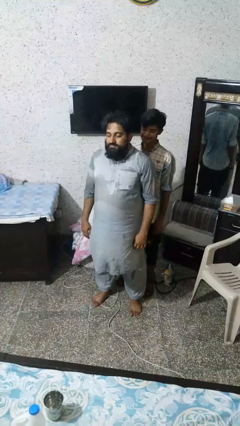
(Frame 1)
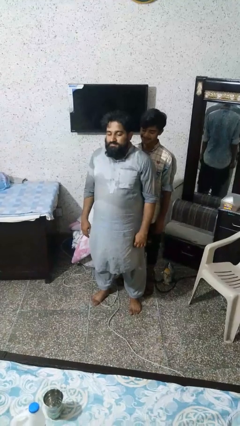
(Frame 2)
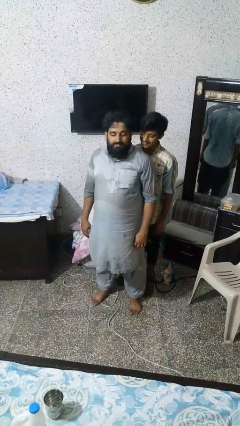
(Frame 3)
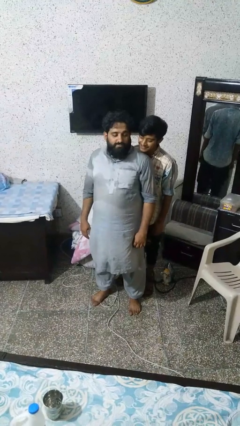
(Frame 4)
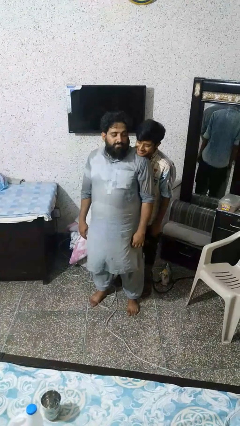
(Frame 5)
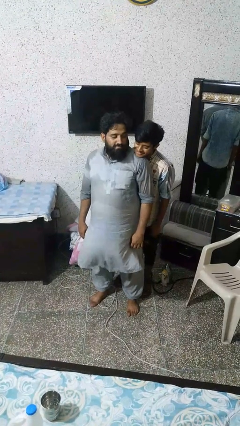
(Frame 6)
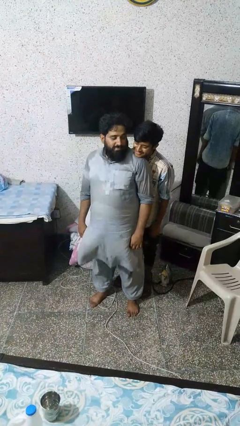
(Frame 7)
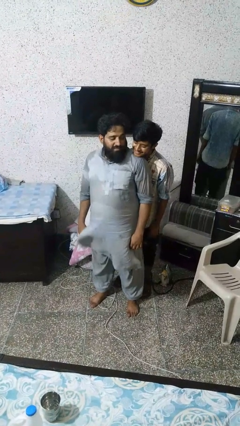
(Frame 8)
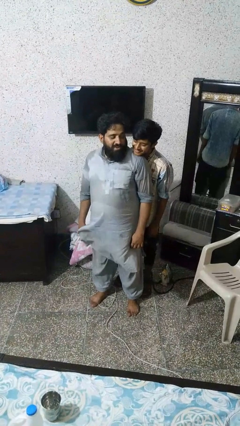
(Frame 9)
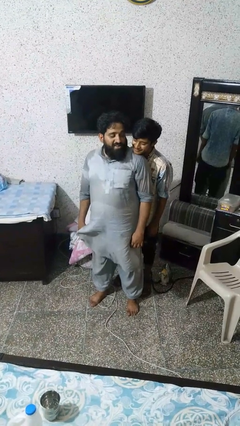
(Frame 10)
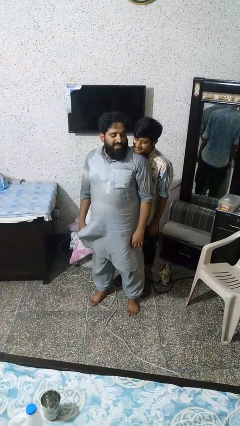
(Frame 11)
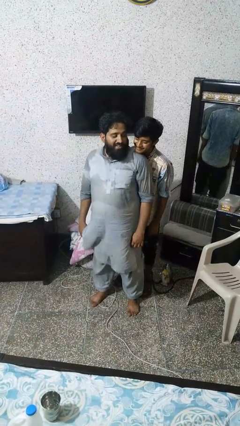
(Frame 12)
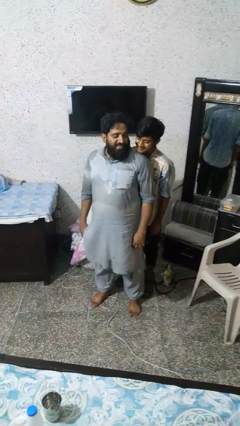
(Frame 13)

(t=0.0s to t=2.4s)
person looks over shoulder

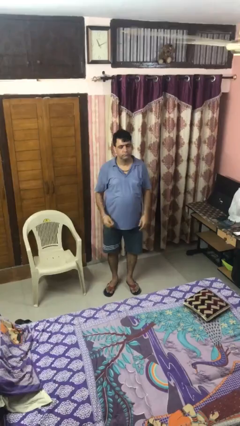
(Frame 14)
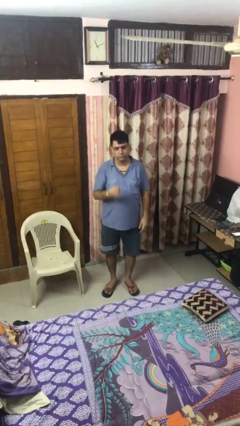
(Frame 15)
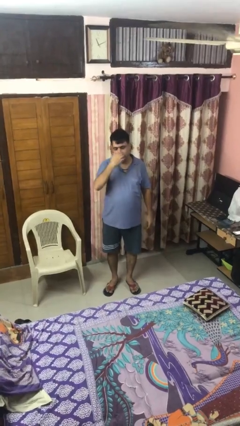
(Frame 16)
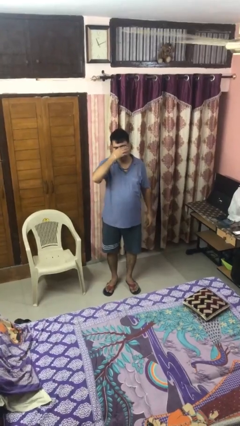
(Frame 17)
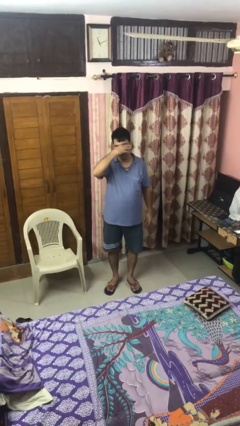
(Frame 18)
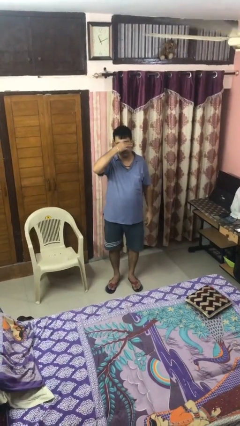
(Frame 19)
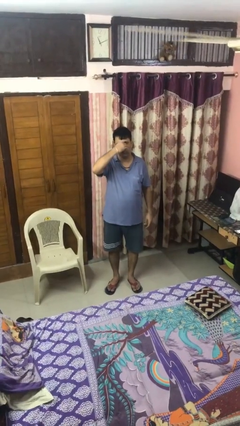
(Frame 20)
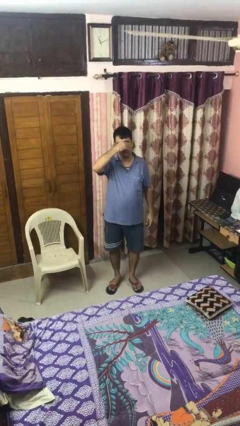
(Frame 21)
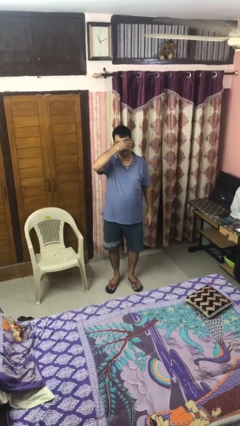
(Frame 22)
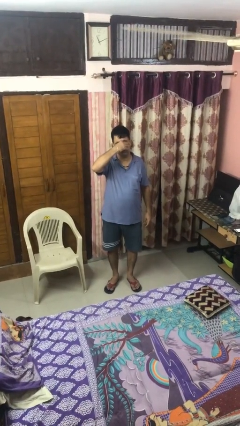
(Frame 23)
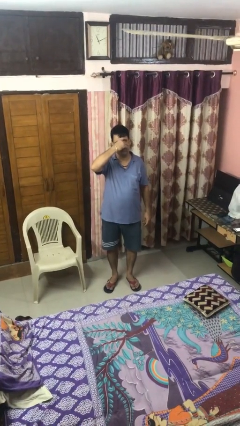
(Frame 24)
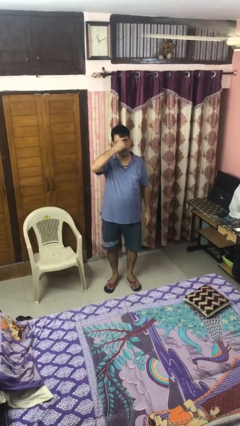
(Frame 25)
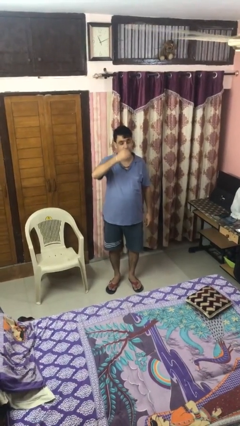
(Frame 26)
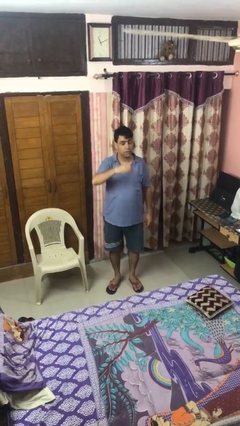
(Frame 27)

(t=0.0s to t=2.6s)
person rubs eyes

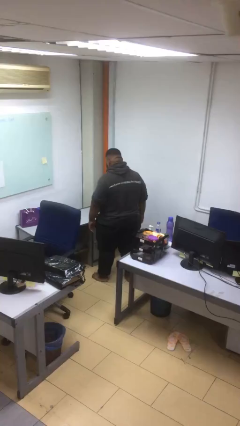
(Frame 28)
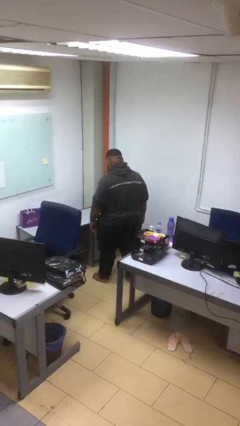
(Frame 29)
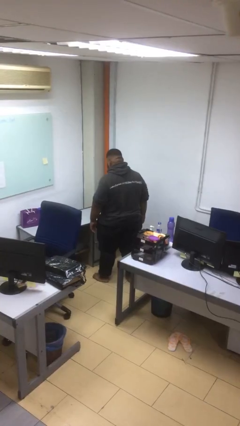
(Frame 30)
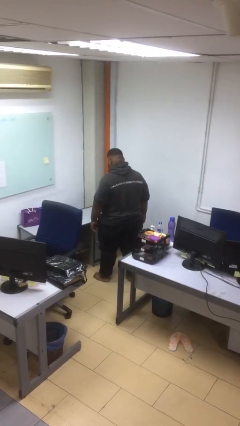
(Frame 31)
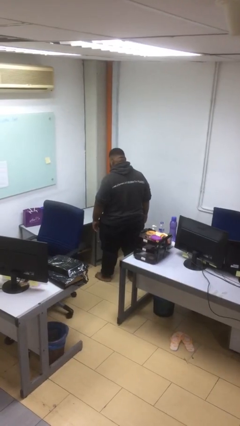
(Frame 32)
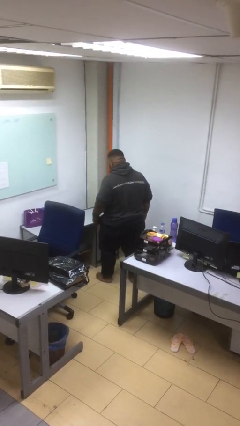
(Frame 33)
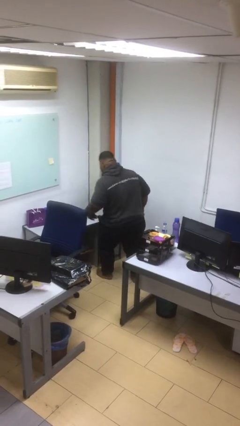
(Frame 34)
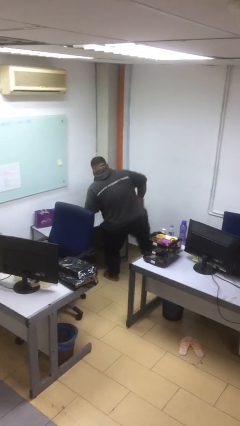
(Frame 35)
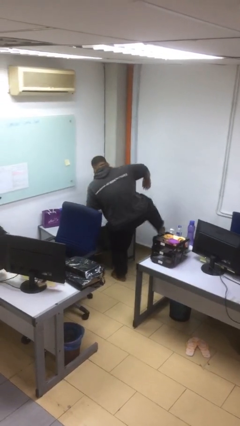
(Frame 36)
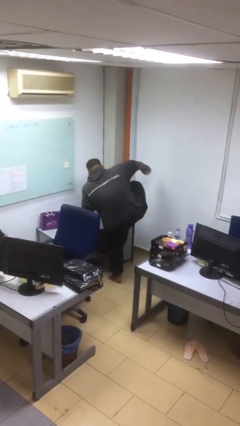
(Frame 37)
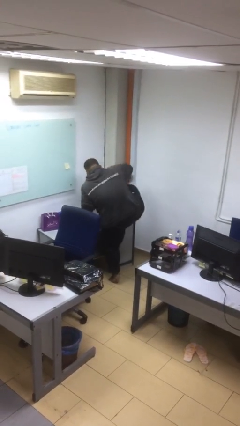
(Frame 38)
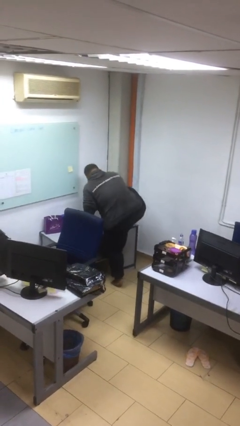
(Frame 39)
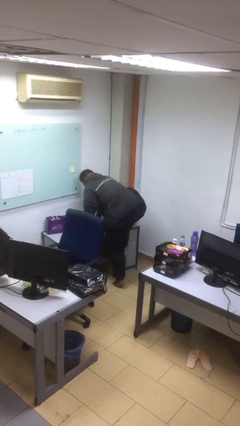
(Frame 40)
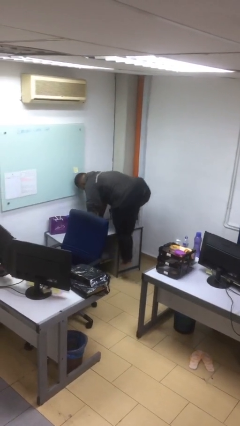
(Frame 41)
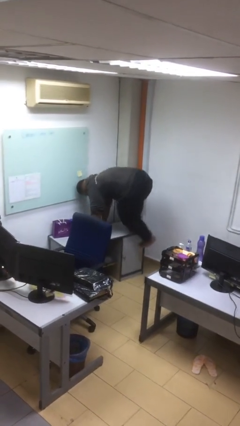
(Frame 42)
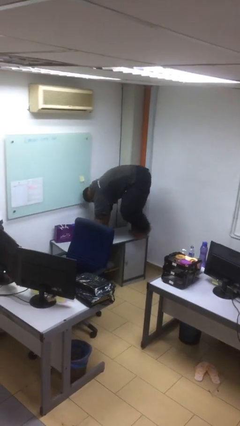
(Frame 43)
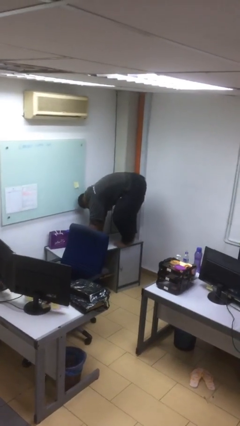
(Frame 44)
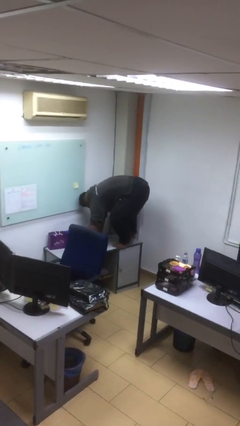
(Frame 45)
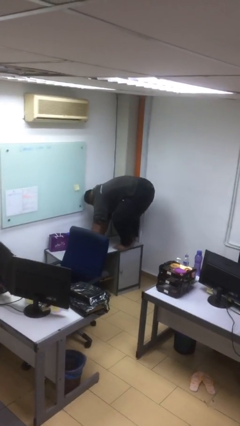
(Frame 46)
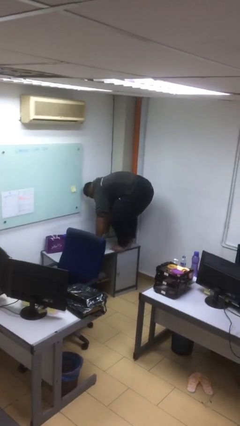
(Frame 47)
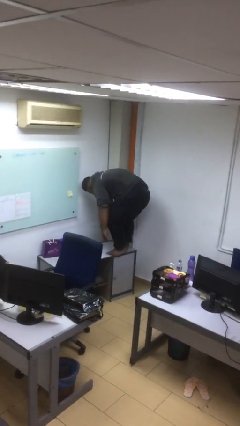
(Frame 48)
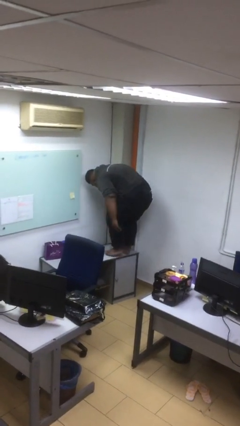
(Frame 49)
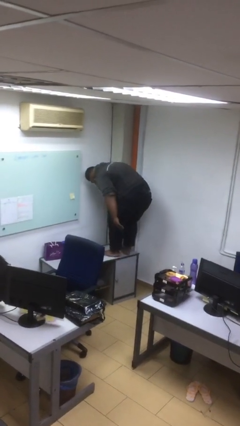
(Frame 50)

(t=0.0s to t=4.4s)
person climbs on table

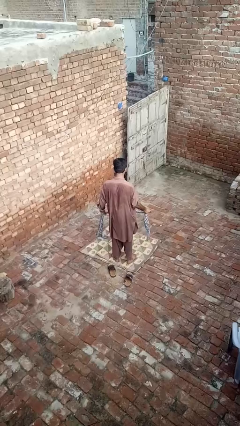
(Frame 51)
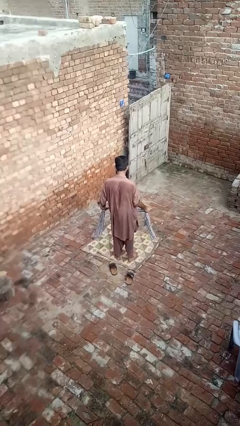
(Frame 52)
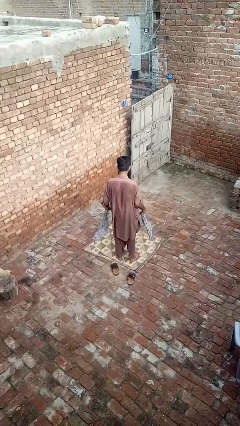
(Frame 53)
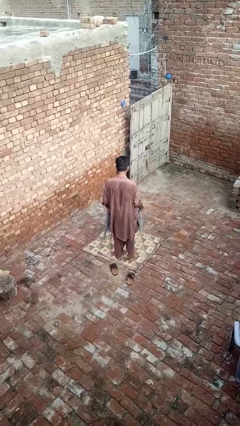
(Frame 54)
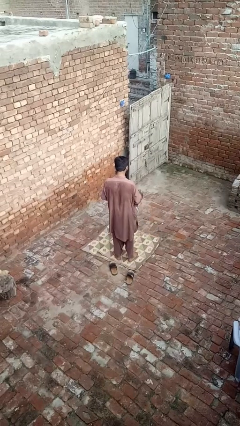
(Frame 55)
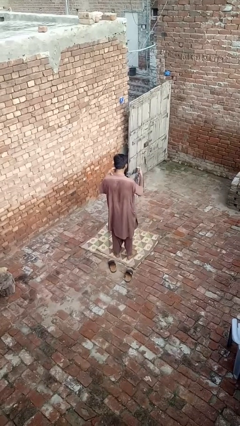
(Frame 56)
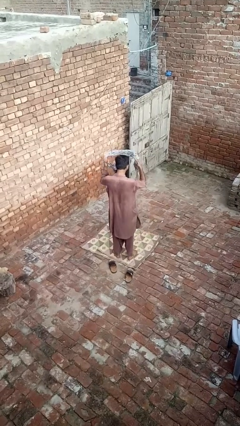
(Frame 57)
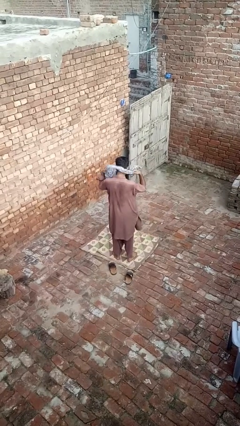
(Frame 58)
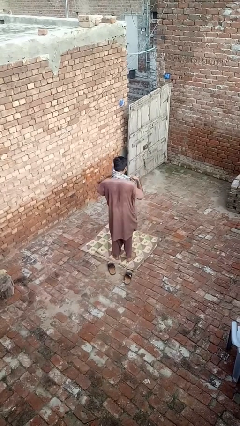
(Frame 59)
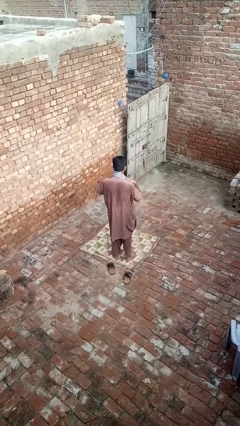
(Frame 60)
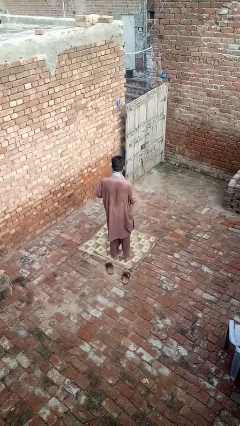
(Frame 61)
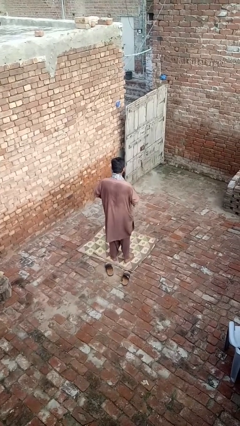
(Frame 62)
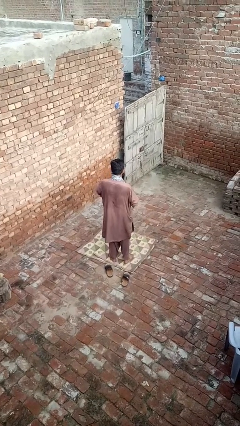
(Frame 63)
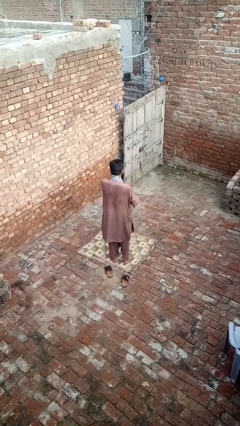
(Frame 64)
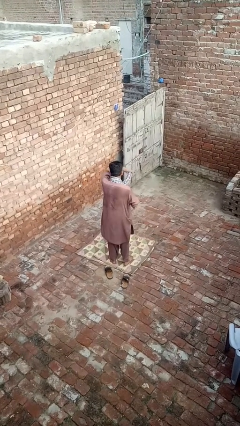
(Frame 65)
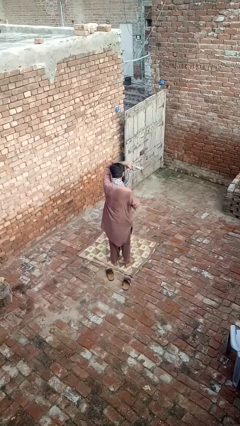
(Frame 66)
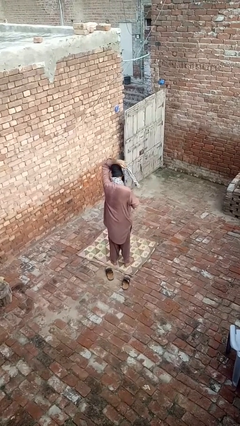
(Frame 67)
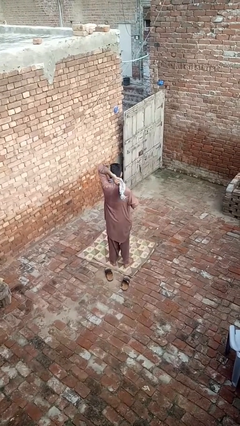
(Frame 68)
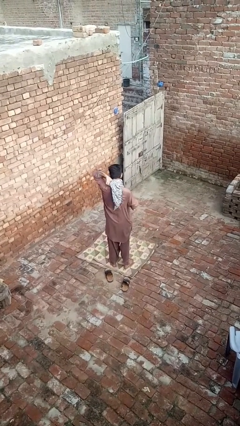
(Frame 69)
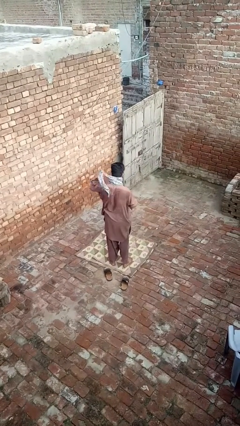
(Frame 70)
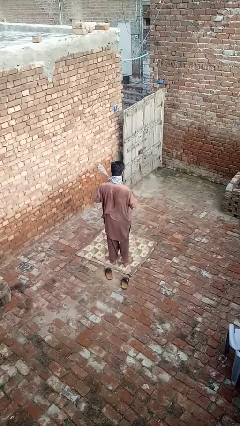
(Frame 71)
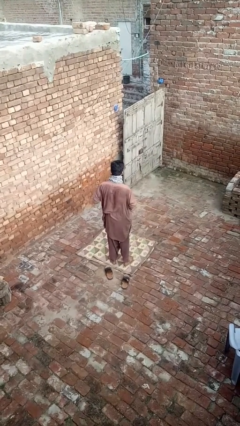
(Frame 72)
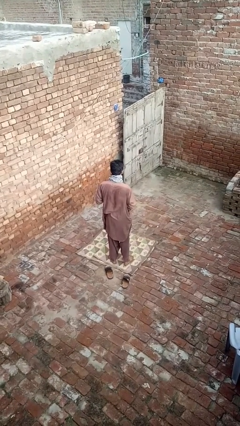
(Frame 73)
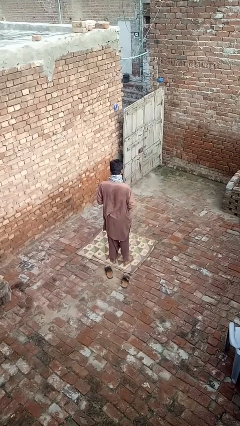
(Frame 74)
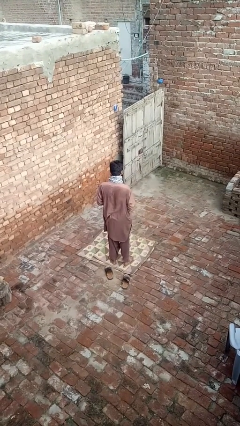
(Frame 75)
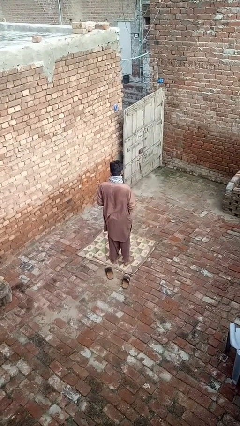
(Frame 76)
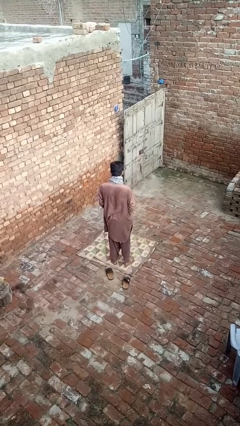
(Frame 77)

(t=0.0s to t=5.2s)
person puts on scarf

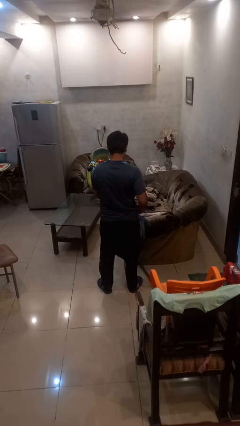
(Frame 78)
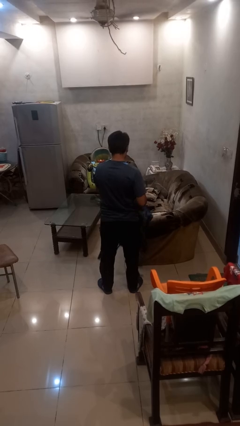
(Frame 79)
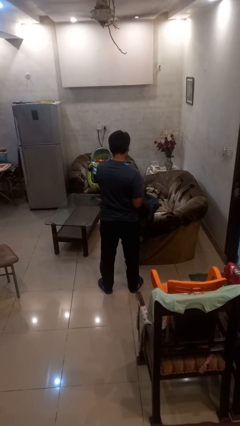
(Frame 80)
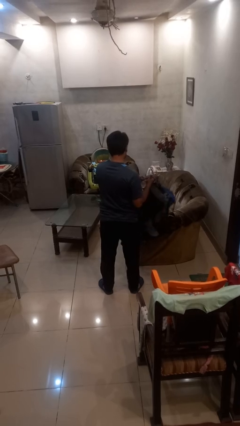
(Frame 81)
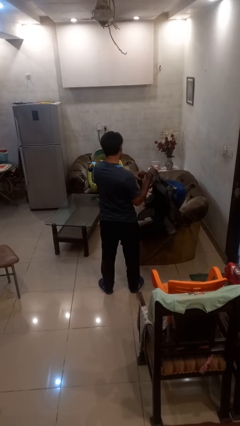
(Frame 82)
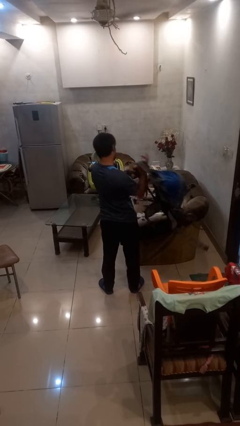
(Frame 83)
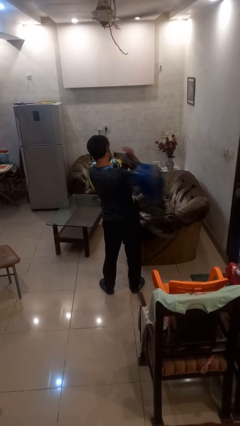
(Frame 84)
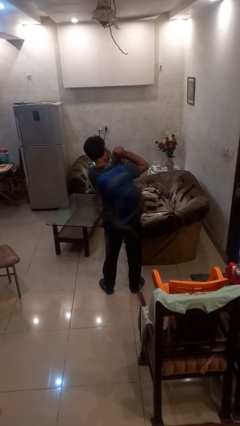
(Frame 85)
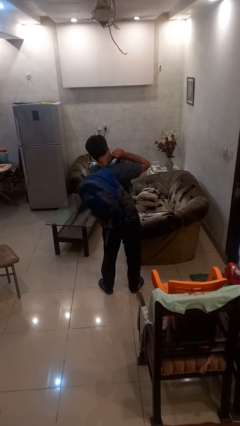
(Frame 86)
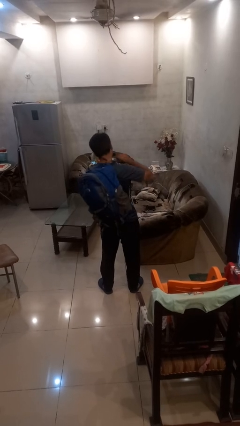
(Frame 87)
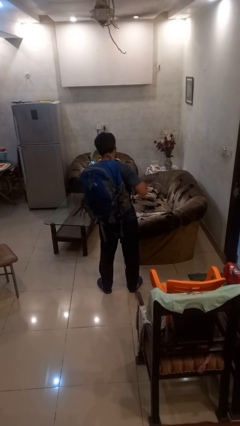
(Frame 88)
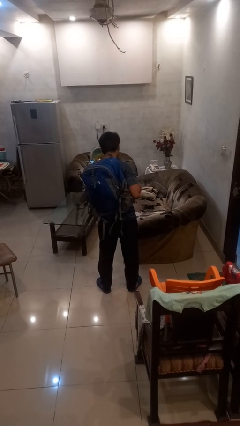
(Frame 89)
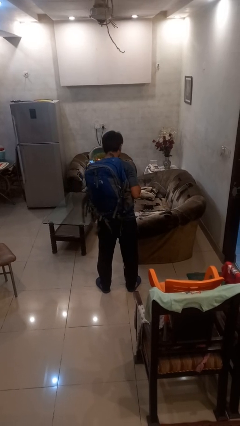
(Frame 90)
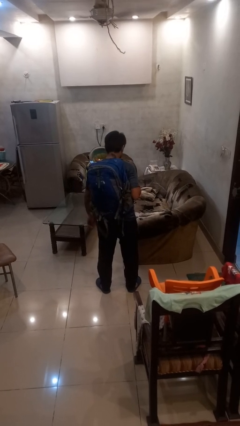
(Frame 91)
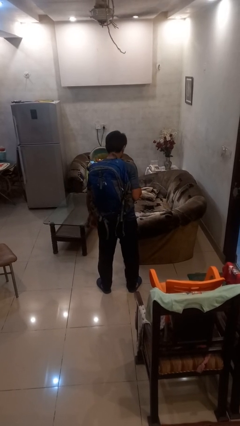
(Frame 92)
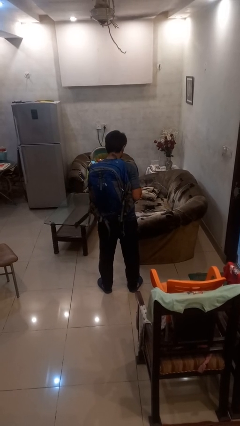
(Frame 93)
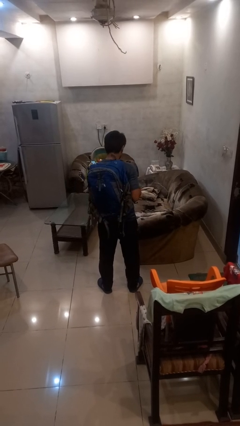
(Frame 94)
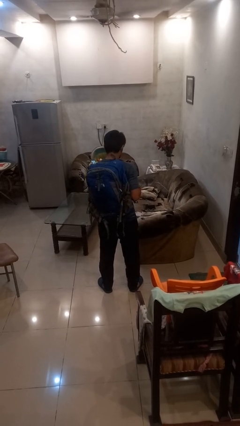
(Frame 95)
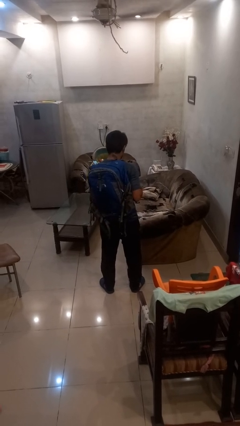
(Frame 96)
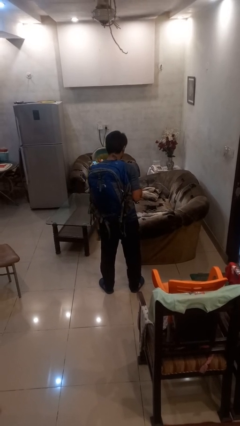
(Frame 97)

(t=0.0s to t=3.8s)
person puts on backpack
